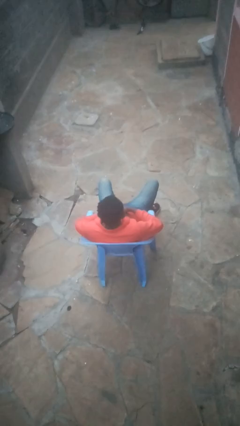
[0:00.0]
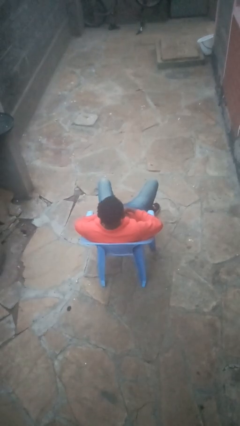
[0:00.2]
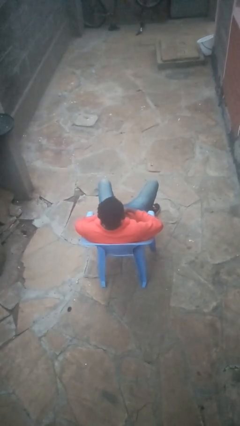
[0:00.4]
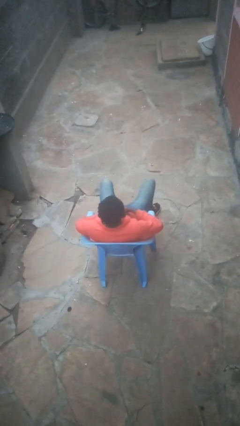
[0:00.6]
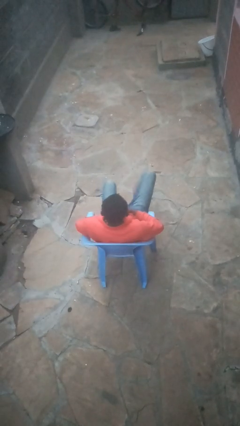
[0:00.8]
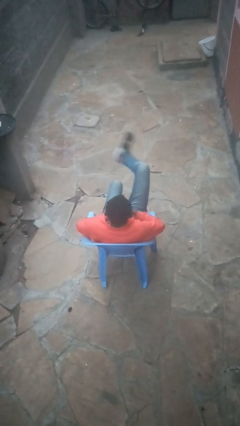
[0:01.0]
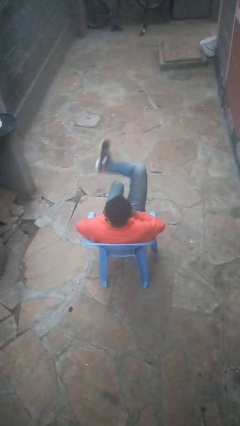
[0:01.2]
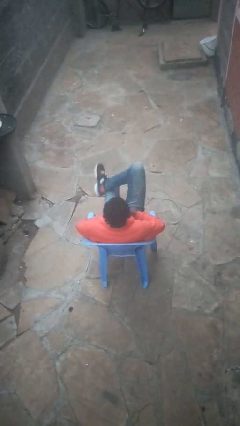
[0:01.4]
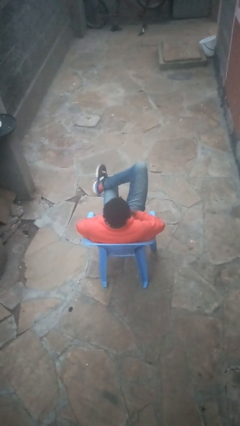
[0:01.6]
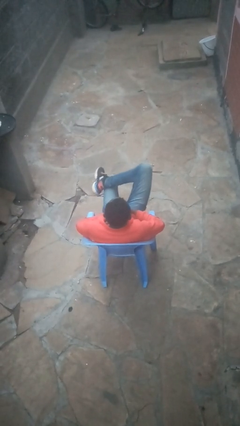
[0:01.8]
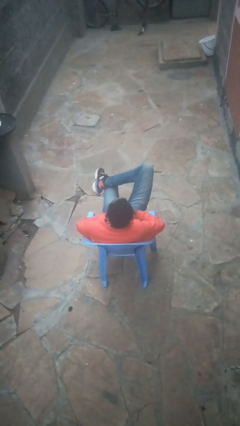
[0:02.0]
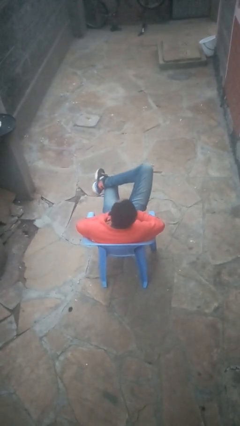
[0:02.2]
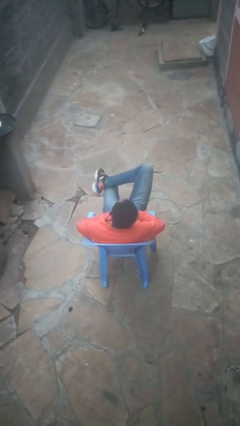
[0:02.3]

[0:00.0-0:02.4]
person crosses legs

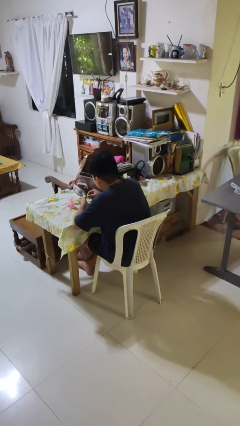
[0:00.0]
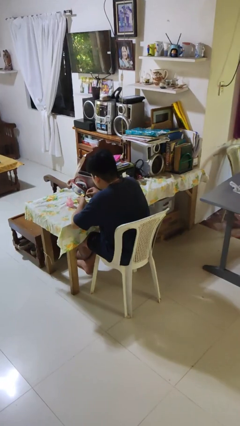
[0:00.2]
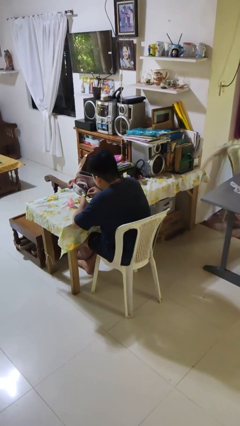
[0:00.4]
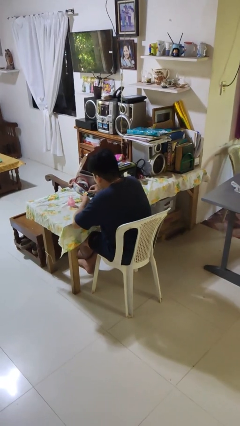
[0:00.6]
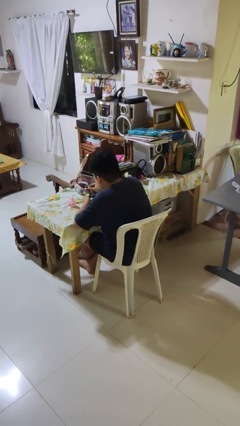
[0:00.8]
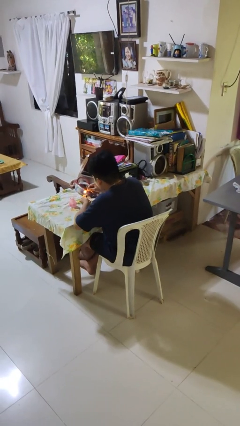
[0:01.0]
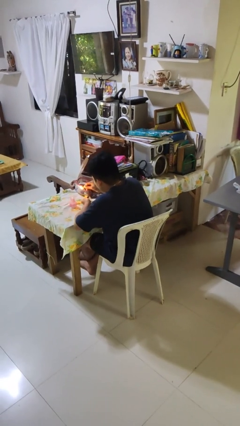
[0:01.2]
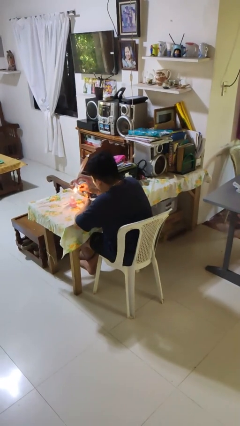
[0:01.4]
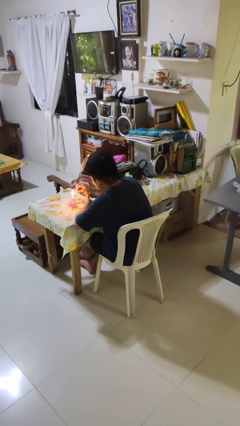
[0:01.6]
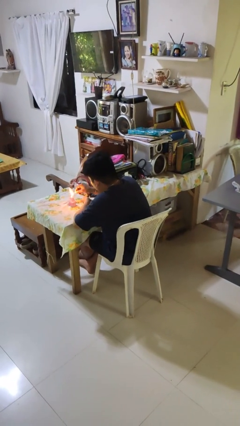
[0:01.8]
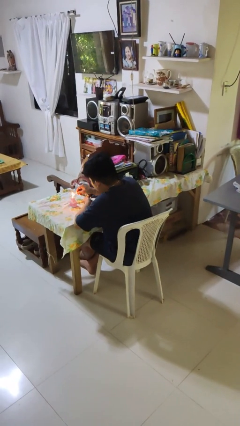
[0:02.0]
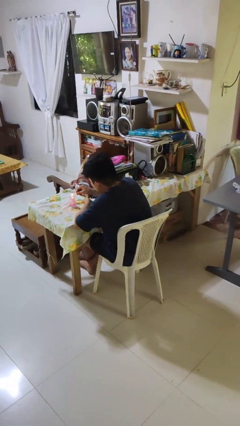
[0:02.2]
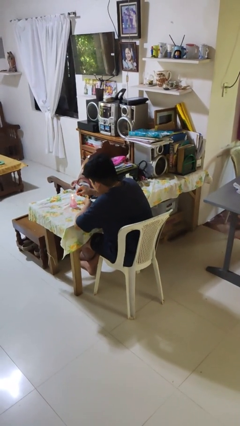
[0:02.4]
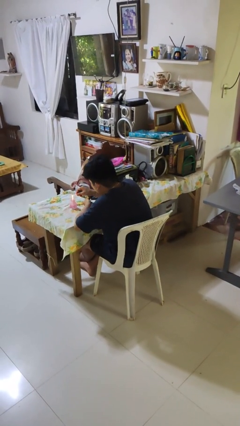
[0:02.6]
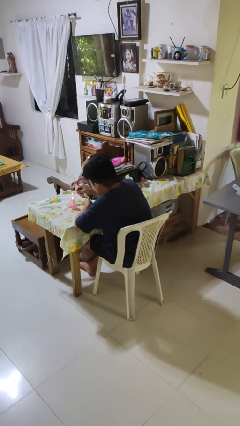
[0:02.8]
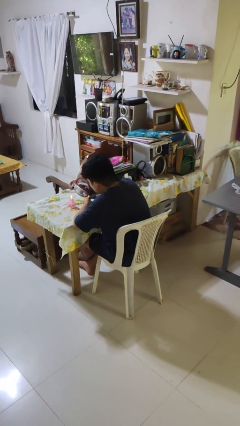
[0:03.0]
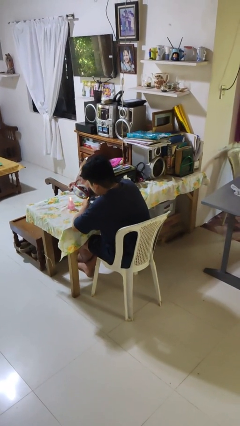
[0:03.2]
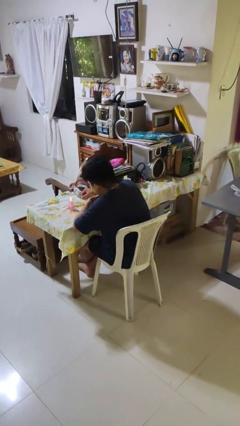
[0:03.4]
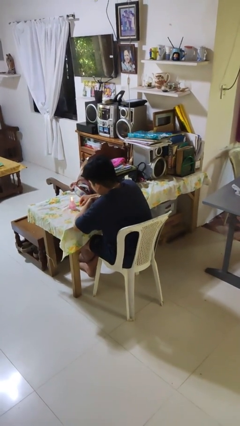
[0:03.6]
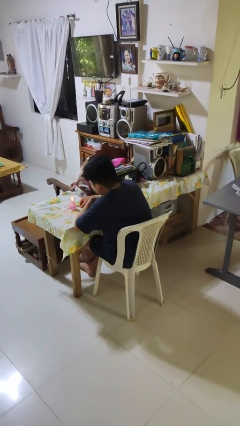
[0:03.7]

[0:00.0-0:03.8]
person lights candle

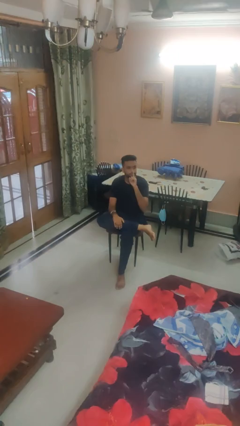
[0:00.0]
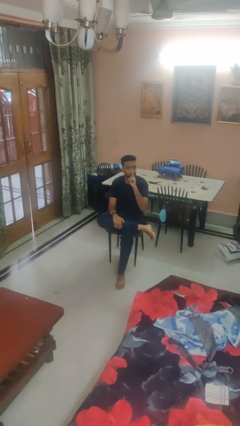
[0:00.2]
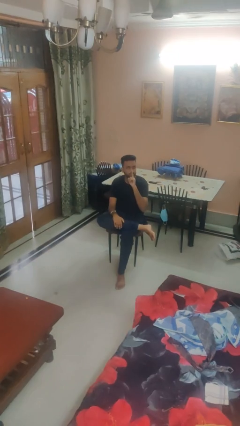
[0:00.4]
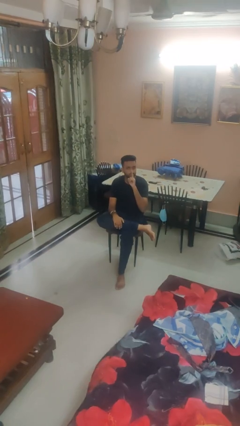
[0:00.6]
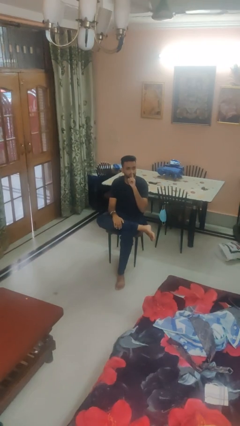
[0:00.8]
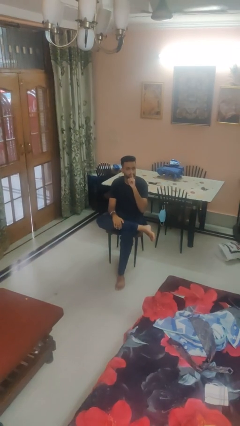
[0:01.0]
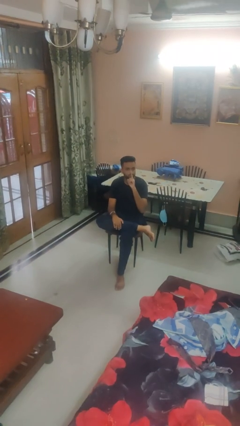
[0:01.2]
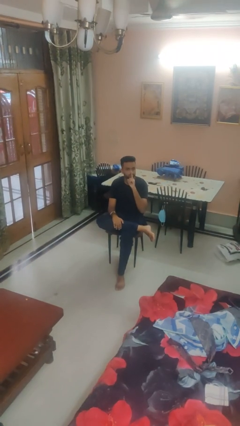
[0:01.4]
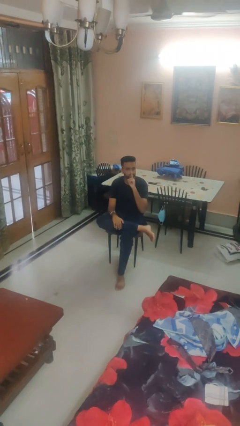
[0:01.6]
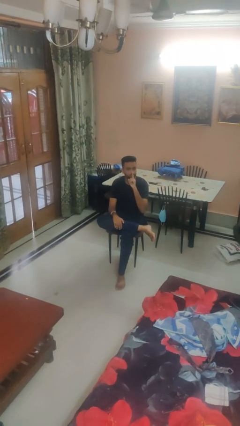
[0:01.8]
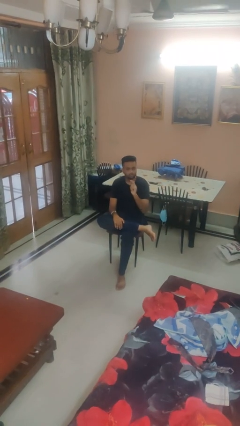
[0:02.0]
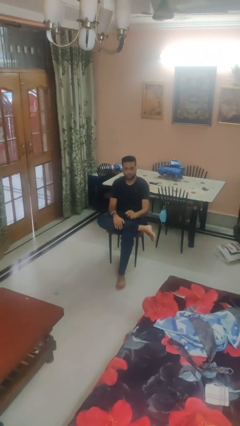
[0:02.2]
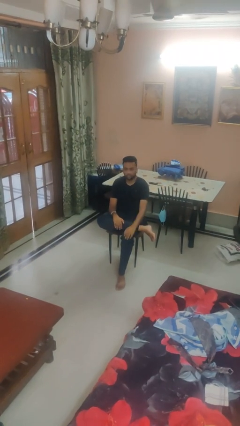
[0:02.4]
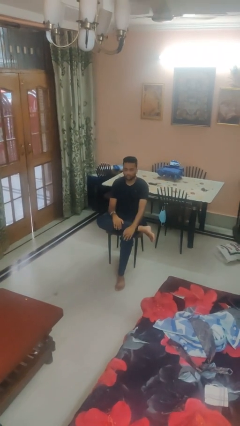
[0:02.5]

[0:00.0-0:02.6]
person gestures be quiet

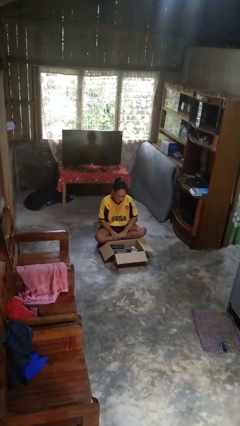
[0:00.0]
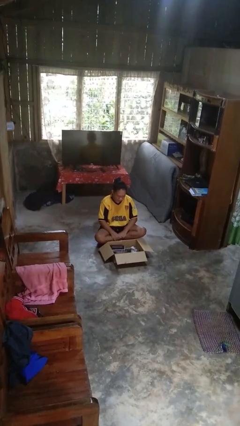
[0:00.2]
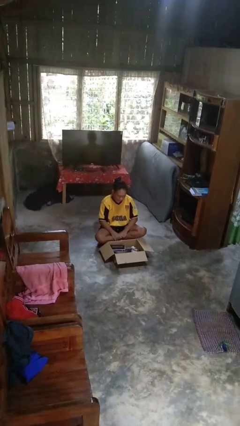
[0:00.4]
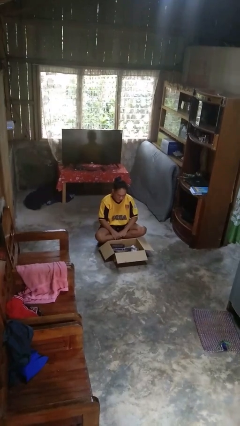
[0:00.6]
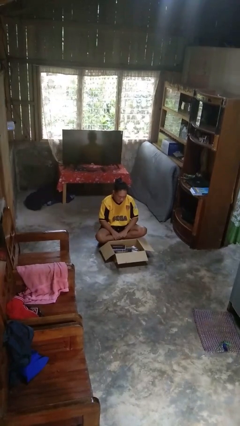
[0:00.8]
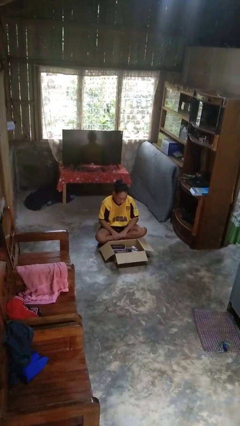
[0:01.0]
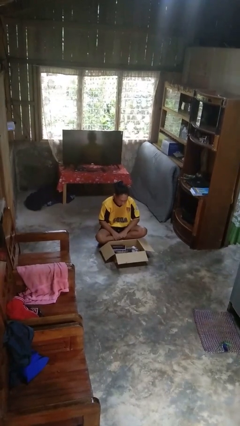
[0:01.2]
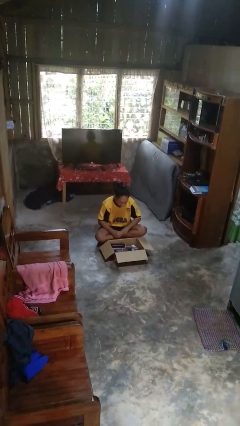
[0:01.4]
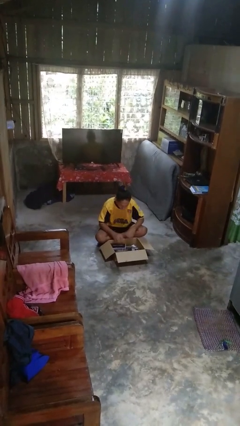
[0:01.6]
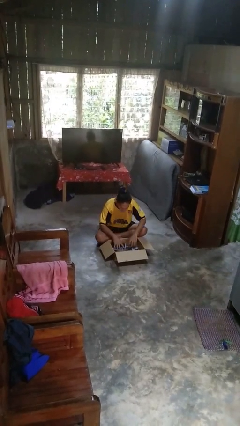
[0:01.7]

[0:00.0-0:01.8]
person searches in box

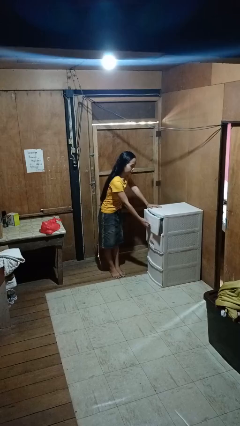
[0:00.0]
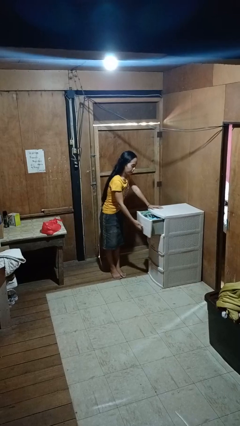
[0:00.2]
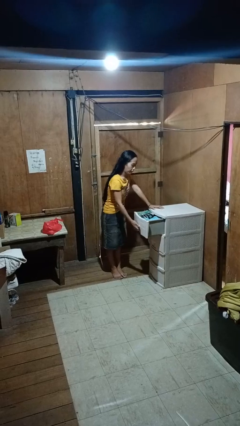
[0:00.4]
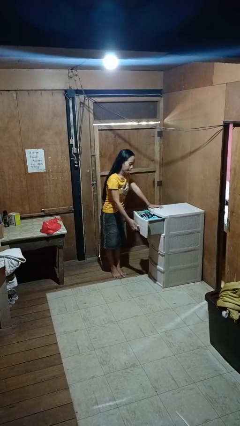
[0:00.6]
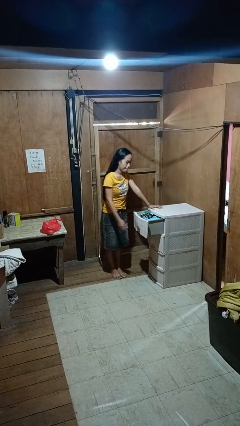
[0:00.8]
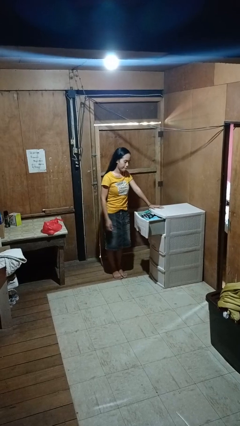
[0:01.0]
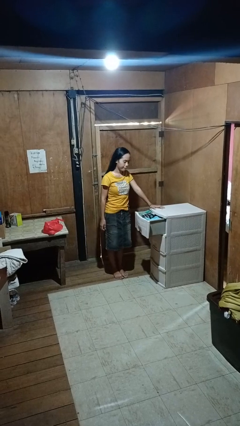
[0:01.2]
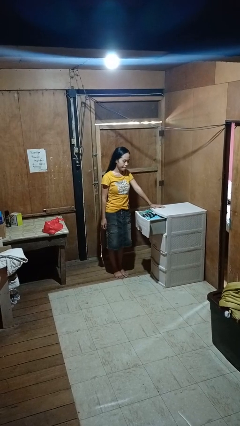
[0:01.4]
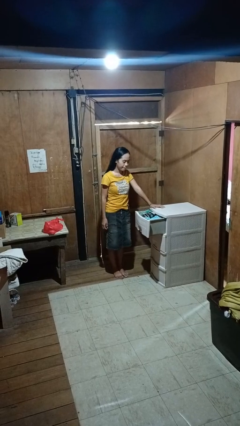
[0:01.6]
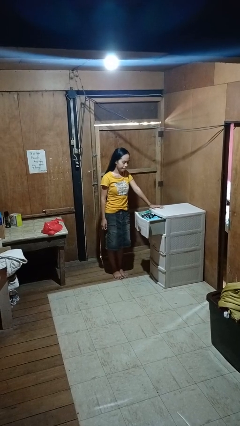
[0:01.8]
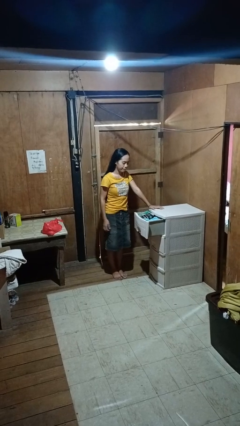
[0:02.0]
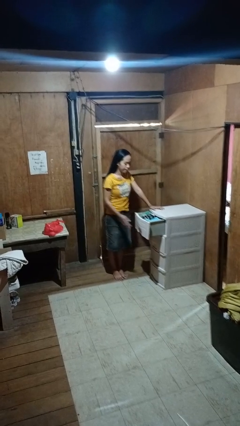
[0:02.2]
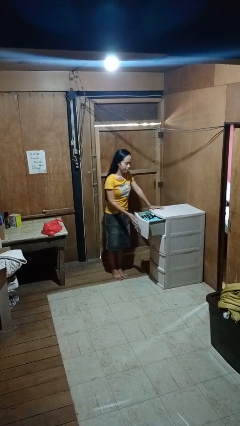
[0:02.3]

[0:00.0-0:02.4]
person opens dresser drawer

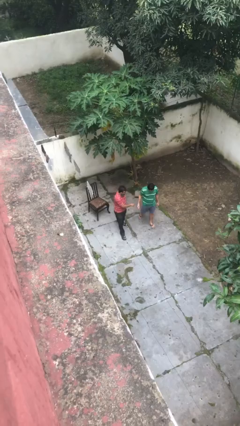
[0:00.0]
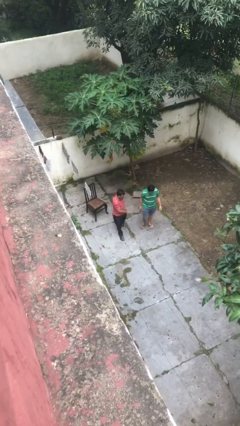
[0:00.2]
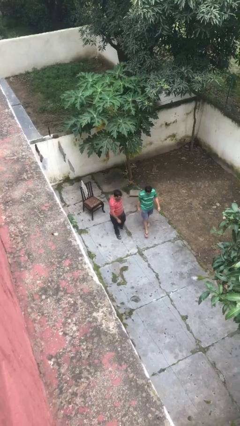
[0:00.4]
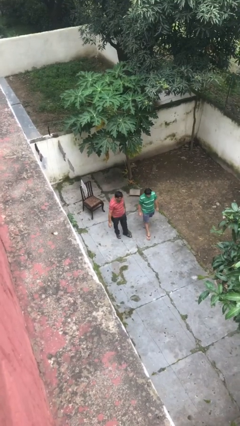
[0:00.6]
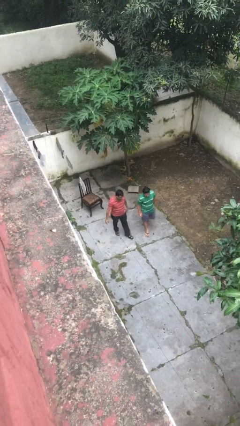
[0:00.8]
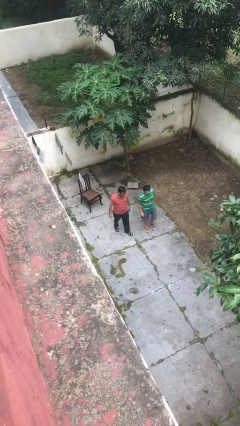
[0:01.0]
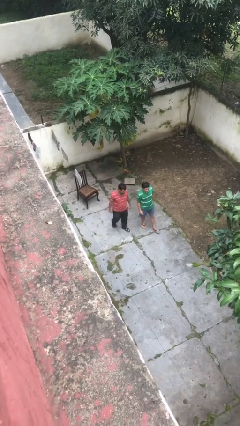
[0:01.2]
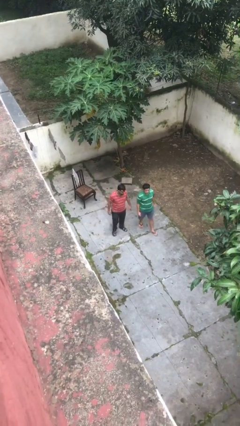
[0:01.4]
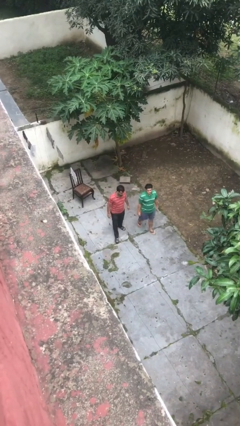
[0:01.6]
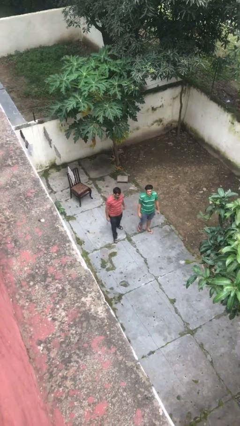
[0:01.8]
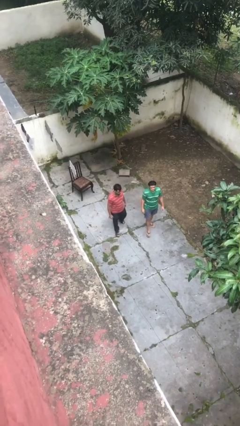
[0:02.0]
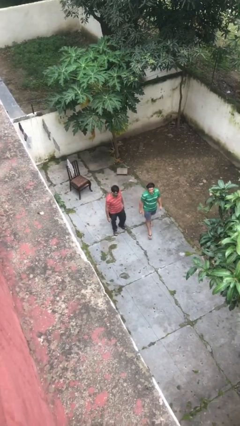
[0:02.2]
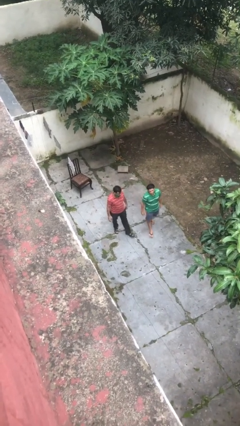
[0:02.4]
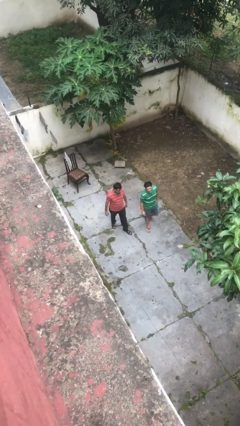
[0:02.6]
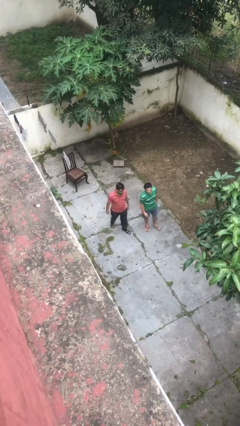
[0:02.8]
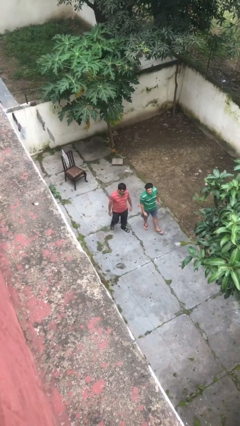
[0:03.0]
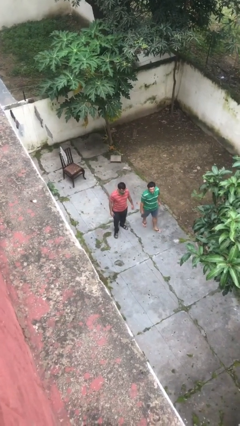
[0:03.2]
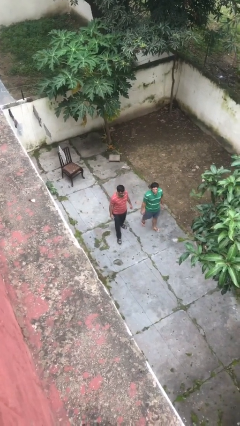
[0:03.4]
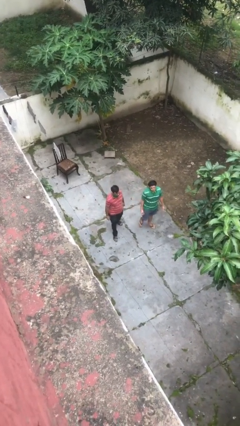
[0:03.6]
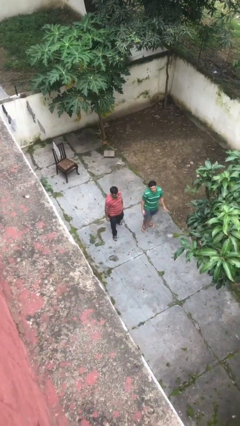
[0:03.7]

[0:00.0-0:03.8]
person talks to person

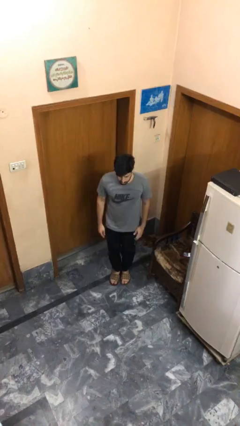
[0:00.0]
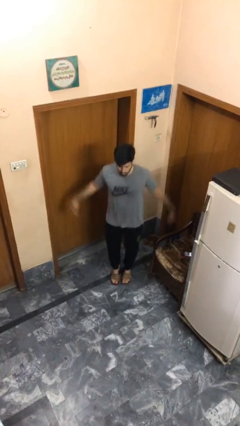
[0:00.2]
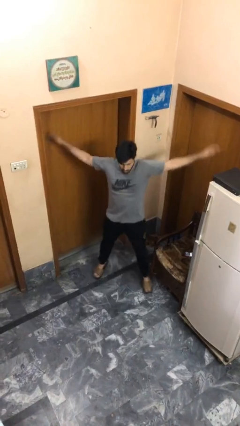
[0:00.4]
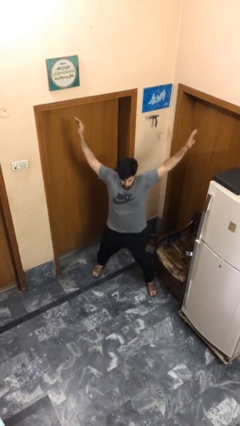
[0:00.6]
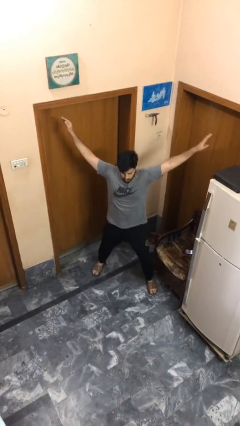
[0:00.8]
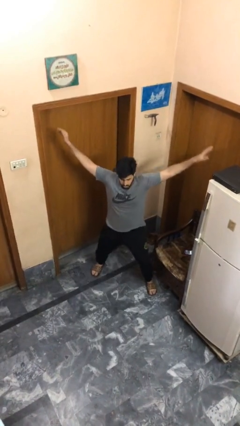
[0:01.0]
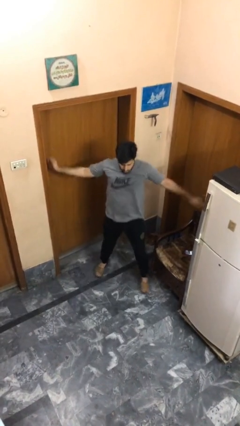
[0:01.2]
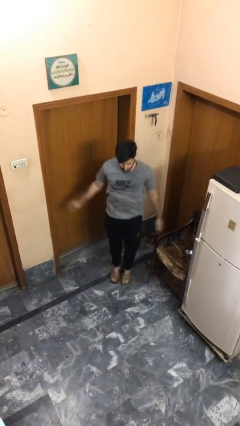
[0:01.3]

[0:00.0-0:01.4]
person exercises with jumping jacks
